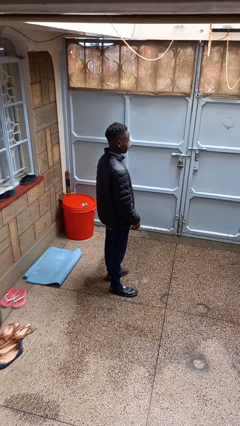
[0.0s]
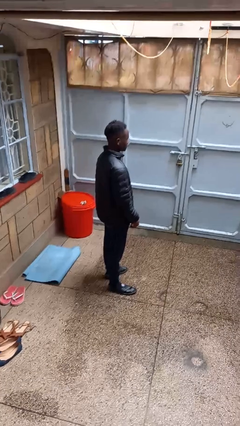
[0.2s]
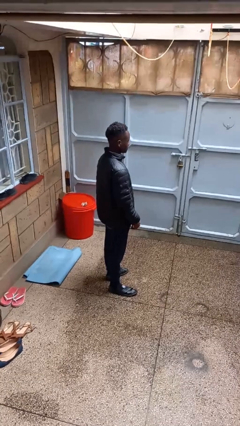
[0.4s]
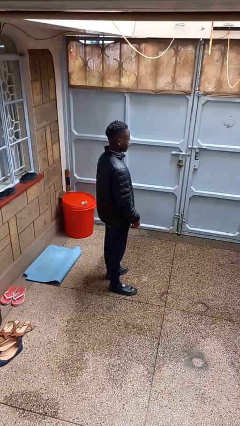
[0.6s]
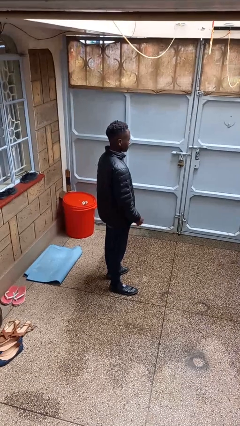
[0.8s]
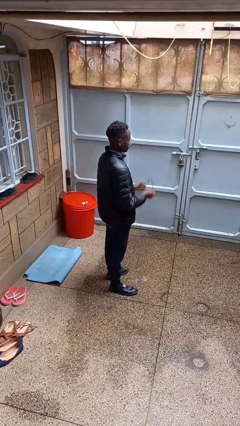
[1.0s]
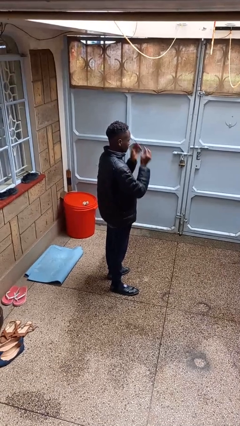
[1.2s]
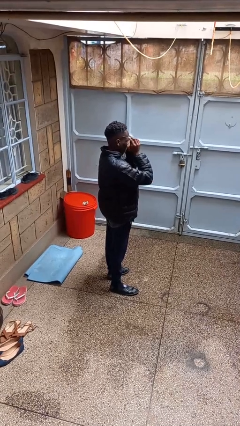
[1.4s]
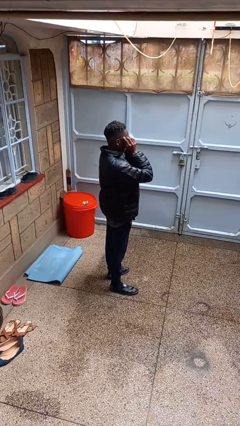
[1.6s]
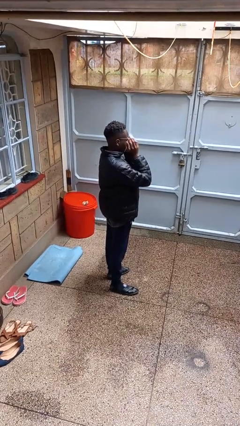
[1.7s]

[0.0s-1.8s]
person puts on glasses

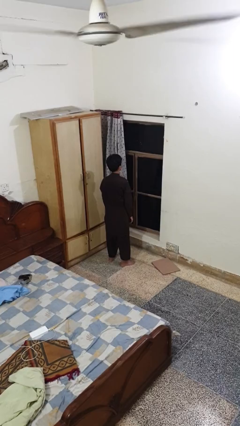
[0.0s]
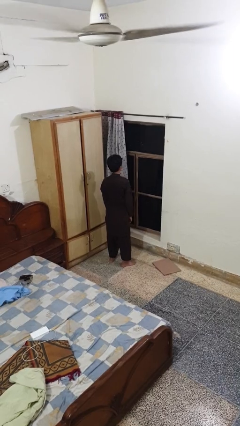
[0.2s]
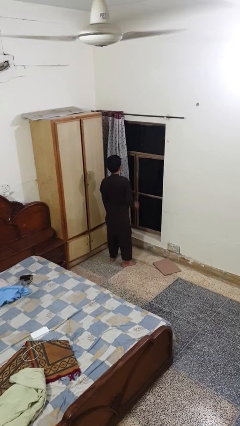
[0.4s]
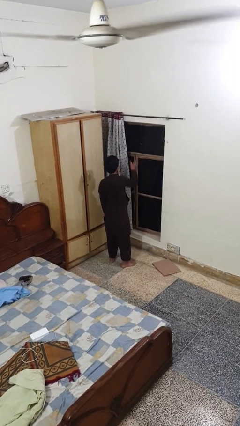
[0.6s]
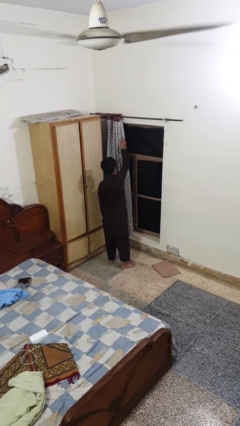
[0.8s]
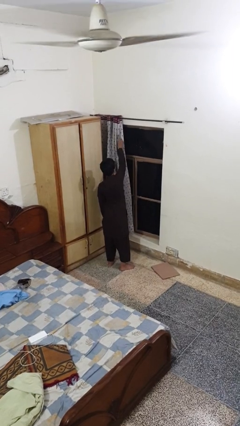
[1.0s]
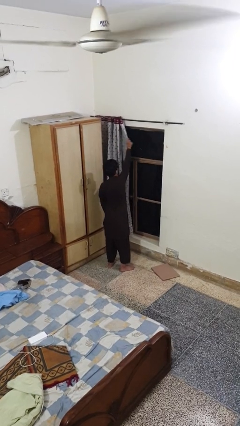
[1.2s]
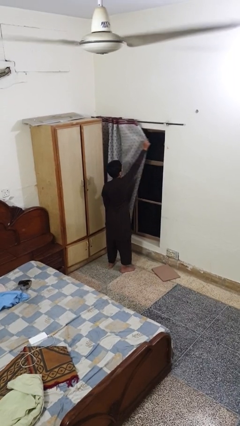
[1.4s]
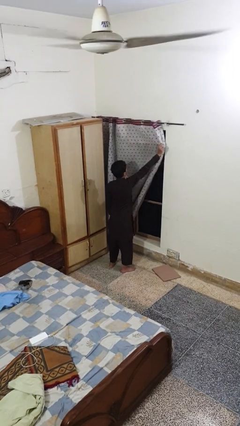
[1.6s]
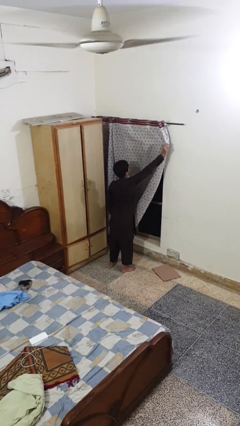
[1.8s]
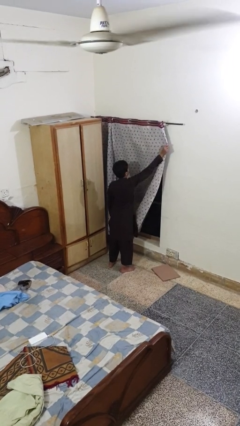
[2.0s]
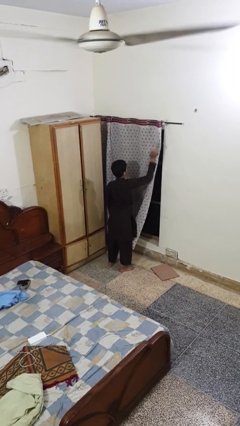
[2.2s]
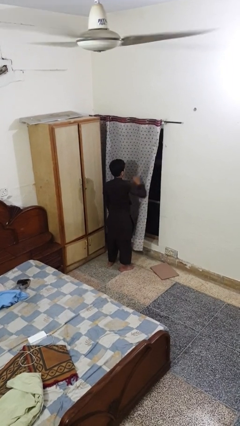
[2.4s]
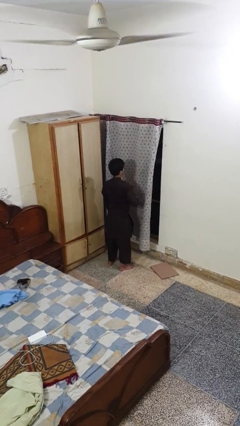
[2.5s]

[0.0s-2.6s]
person closes curtains

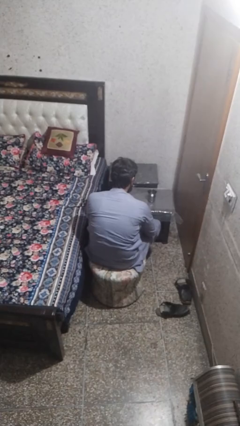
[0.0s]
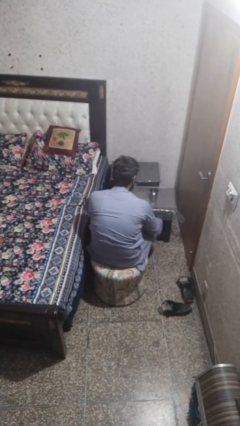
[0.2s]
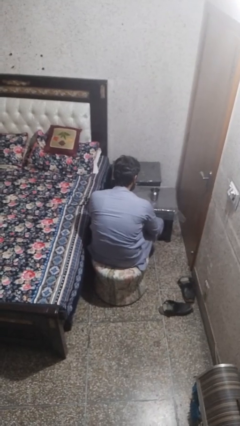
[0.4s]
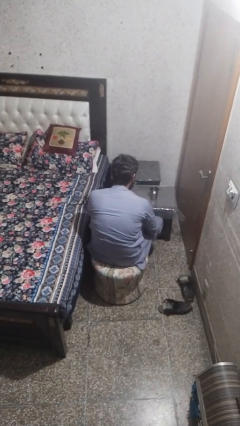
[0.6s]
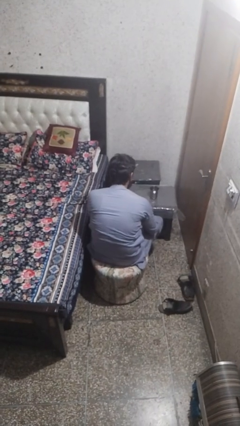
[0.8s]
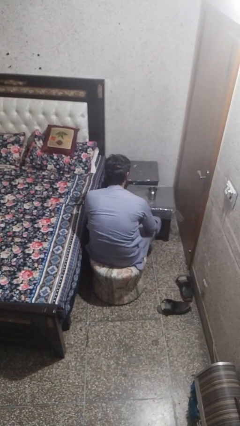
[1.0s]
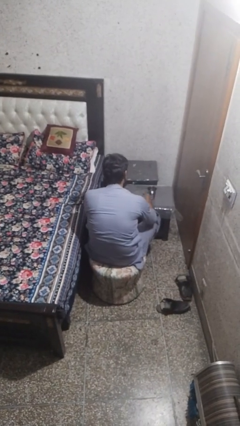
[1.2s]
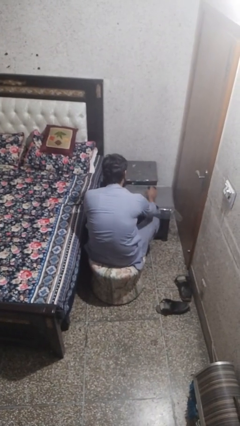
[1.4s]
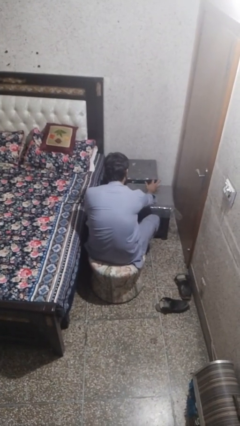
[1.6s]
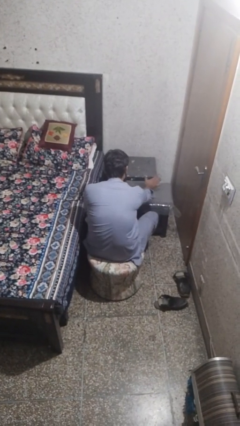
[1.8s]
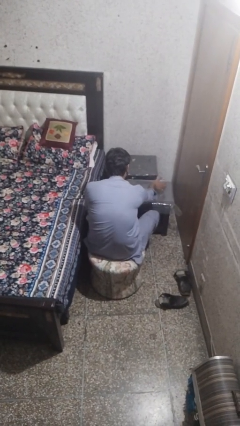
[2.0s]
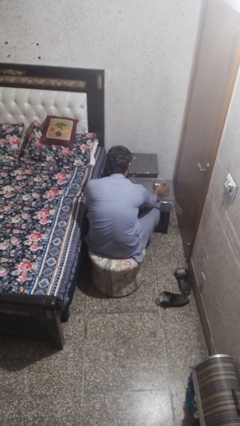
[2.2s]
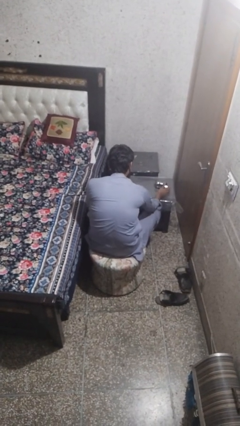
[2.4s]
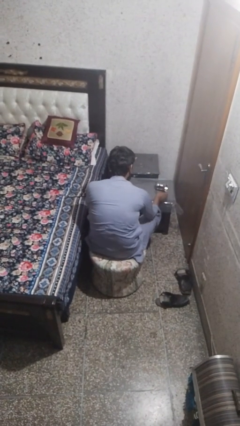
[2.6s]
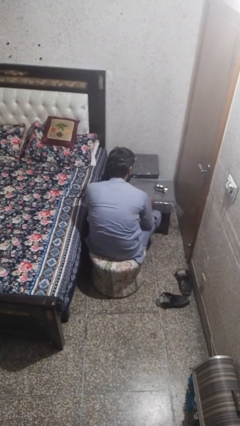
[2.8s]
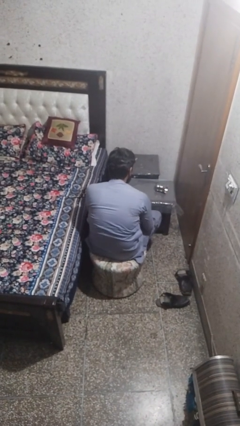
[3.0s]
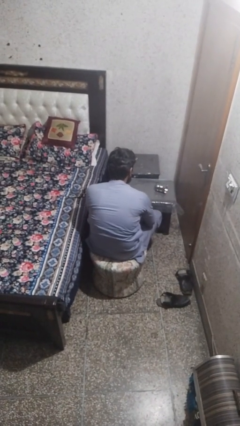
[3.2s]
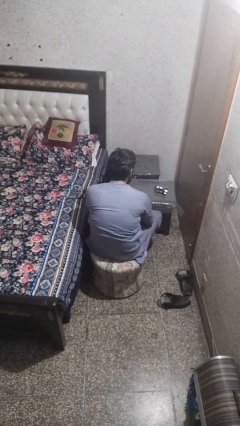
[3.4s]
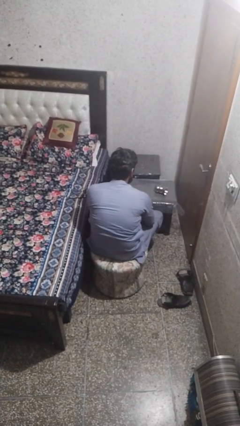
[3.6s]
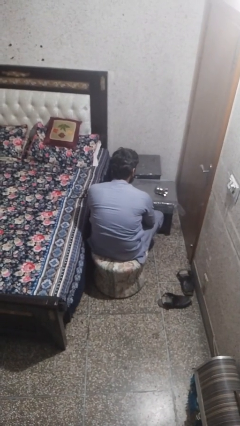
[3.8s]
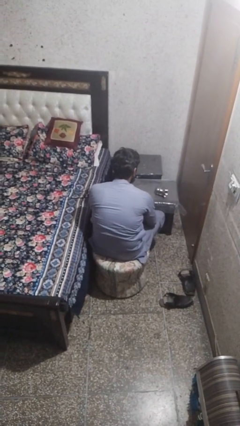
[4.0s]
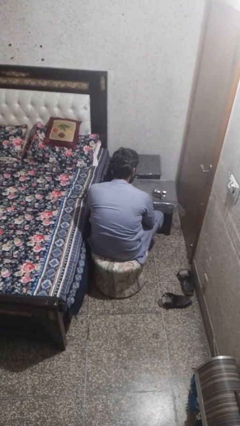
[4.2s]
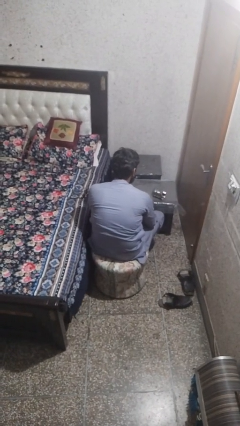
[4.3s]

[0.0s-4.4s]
person knocks over glass

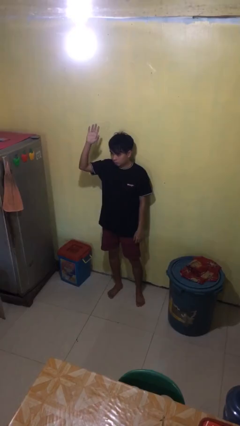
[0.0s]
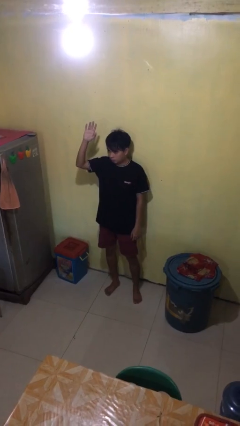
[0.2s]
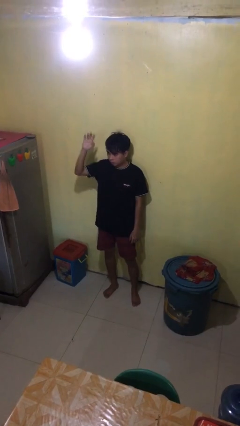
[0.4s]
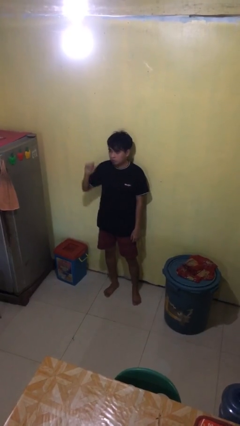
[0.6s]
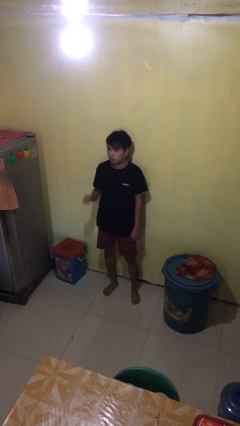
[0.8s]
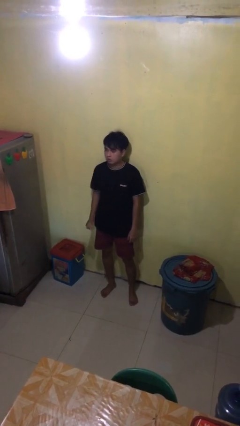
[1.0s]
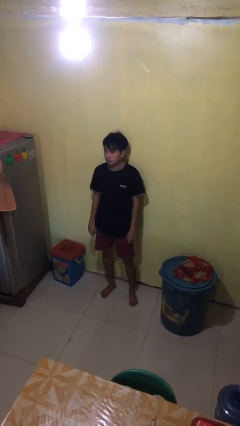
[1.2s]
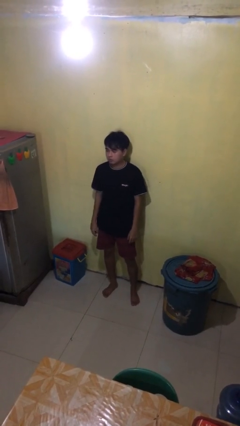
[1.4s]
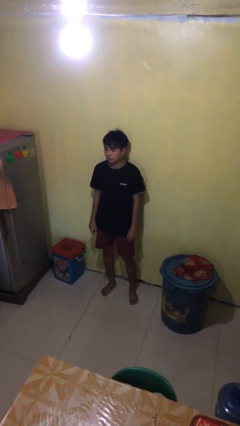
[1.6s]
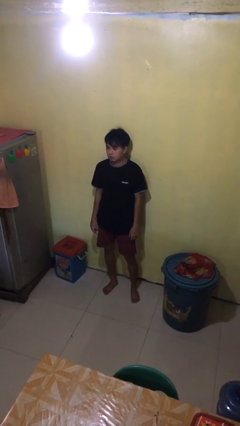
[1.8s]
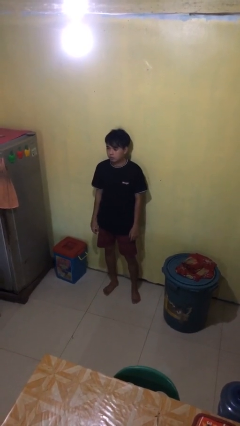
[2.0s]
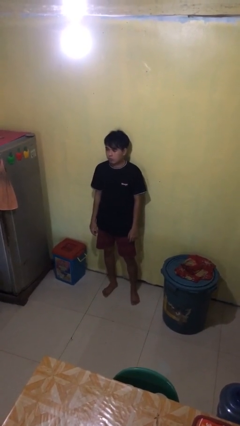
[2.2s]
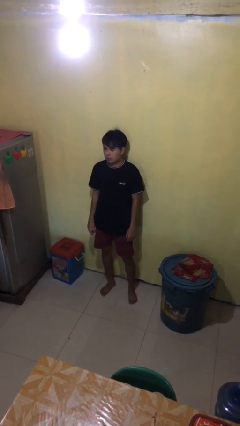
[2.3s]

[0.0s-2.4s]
person gestures lower hand

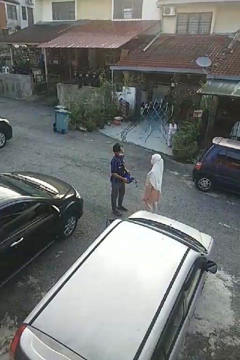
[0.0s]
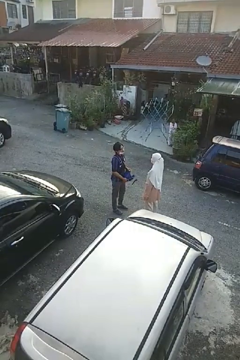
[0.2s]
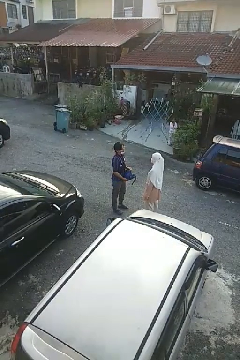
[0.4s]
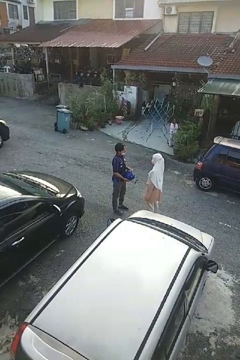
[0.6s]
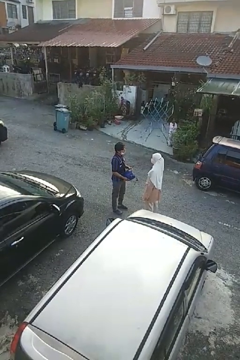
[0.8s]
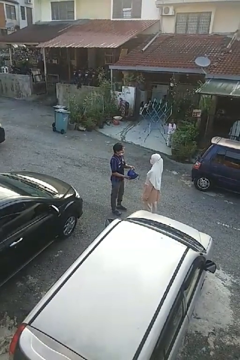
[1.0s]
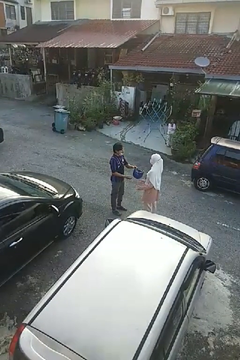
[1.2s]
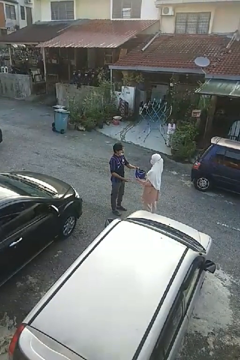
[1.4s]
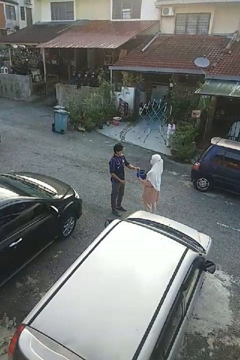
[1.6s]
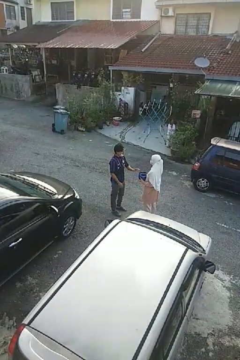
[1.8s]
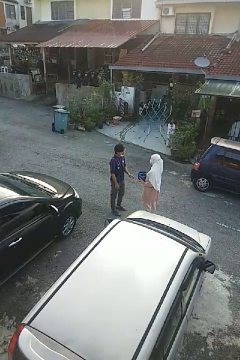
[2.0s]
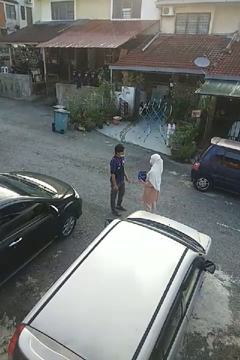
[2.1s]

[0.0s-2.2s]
person transfers object to person

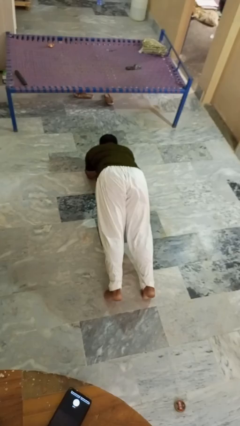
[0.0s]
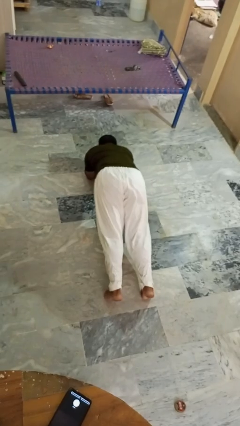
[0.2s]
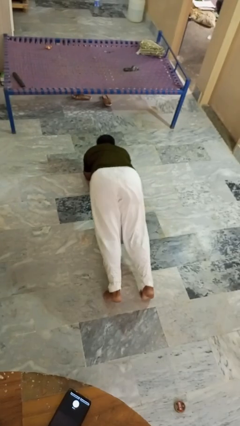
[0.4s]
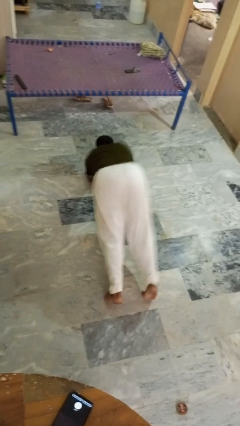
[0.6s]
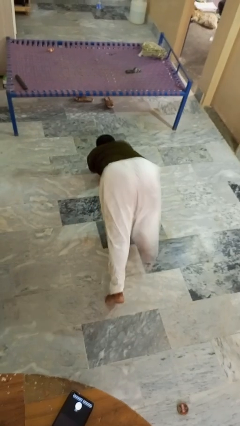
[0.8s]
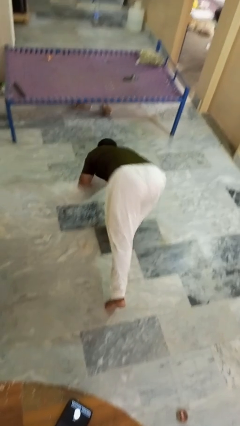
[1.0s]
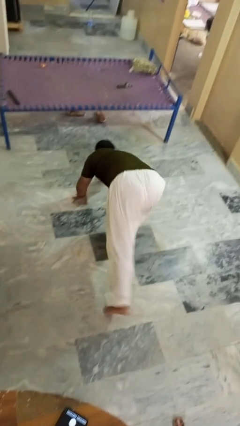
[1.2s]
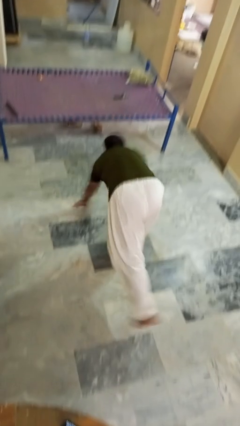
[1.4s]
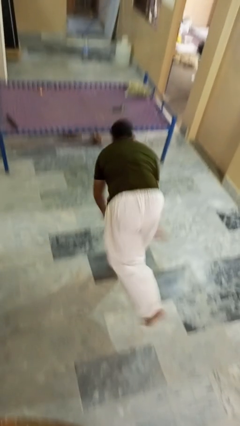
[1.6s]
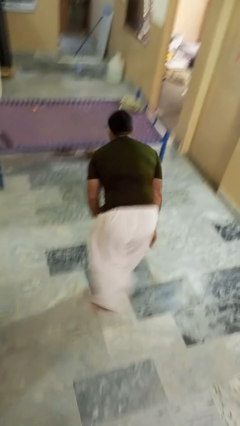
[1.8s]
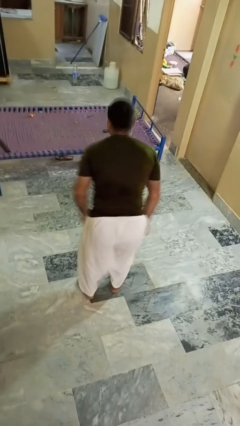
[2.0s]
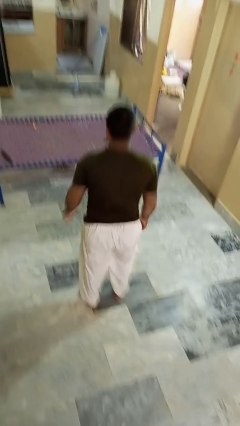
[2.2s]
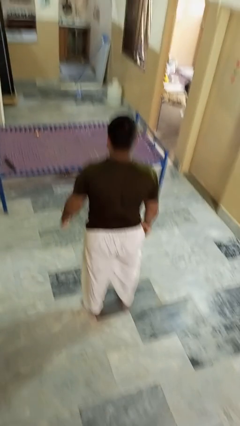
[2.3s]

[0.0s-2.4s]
person stands up from floor

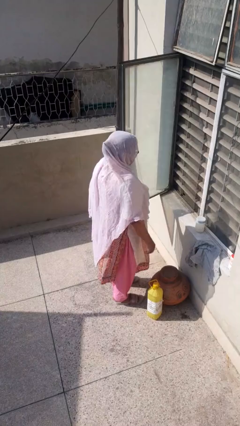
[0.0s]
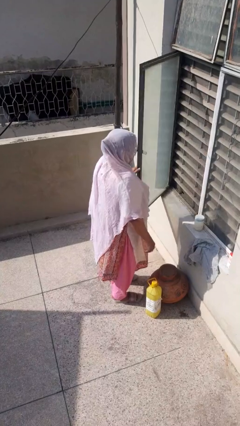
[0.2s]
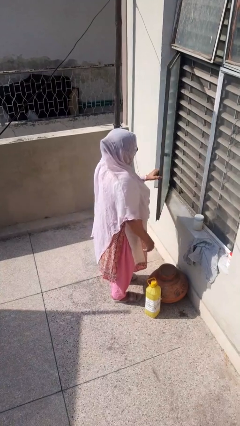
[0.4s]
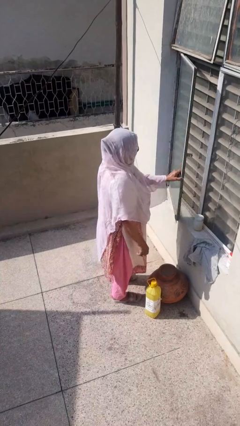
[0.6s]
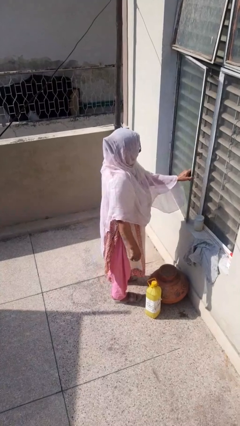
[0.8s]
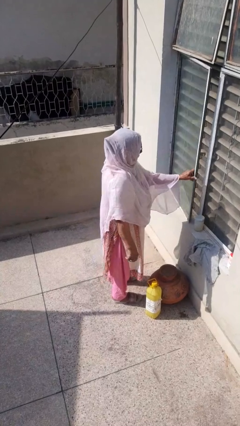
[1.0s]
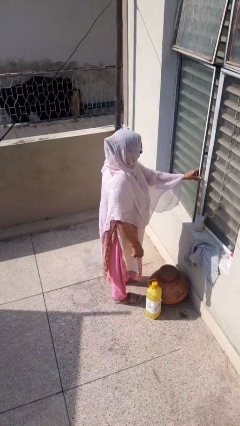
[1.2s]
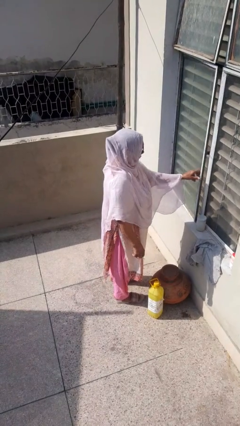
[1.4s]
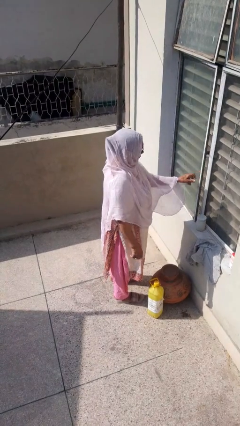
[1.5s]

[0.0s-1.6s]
person closes home window

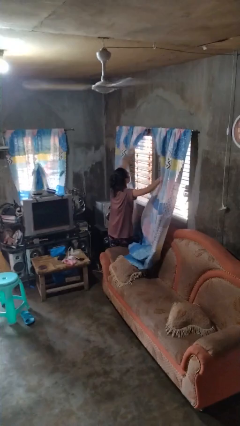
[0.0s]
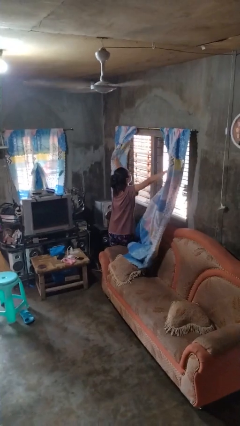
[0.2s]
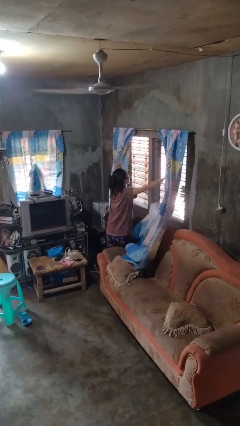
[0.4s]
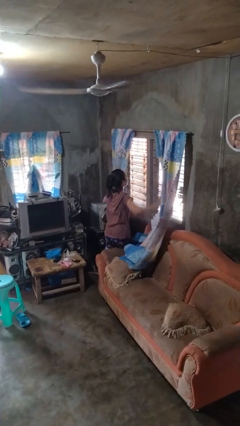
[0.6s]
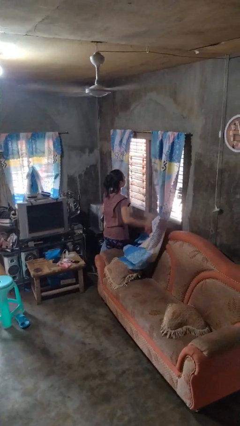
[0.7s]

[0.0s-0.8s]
person opens curtains
